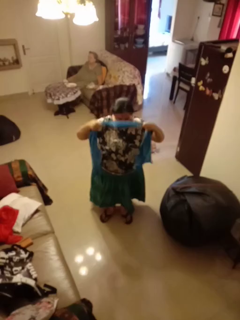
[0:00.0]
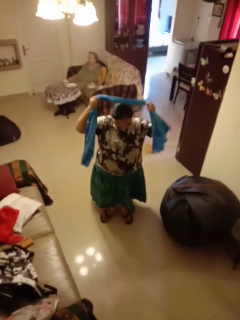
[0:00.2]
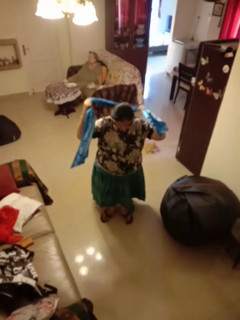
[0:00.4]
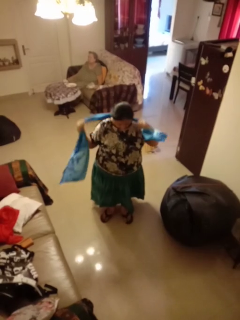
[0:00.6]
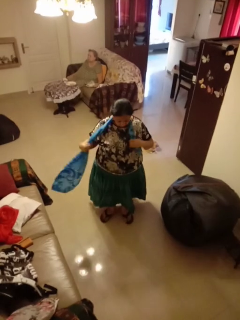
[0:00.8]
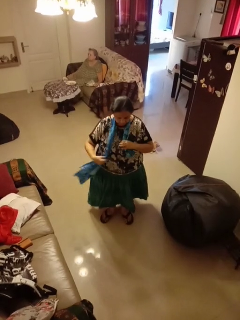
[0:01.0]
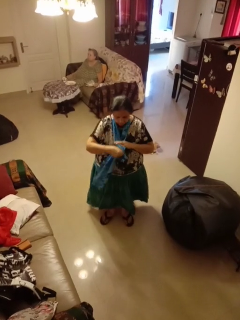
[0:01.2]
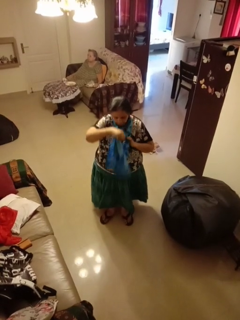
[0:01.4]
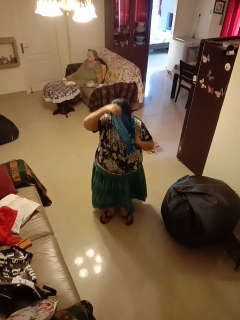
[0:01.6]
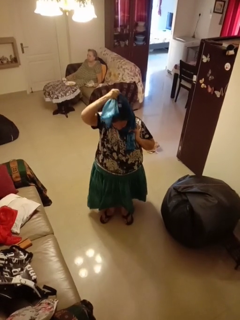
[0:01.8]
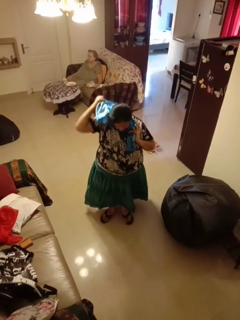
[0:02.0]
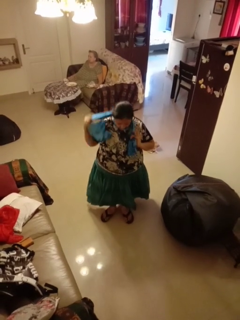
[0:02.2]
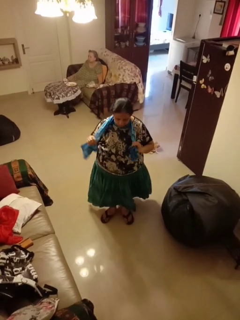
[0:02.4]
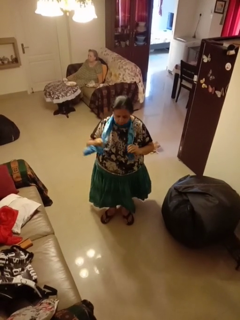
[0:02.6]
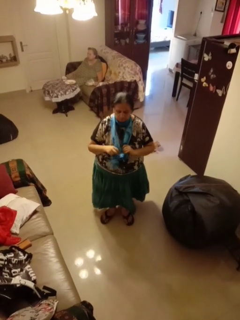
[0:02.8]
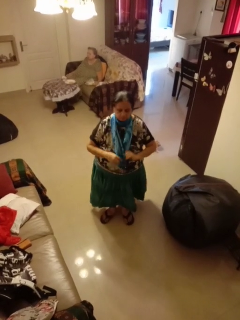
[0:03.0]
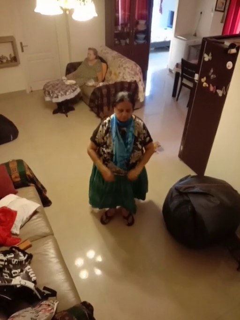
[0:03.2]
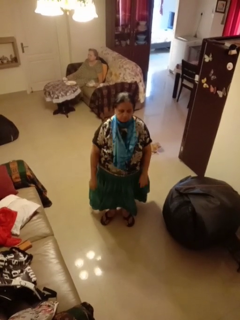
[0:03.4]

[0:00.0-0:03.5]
person puts on scarf

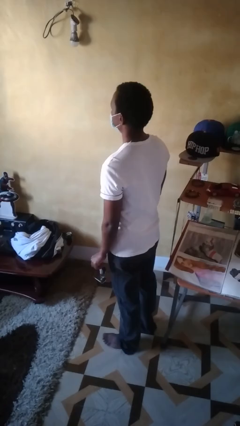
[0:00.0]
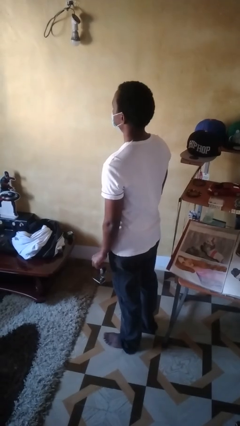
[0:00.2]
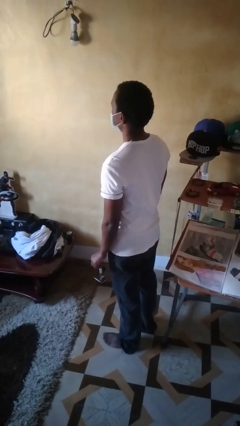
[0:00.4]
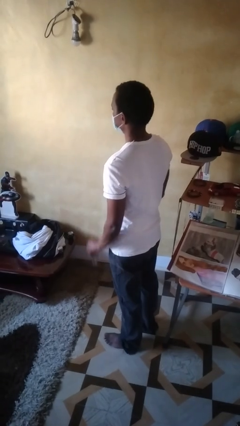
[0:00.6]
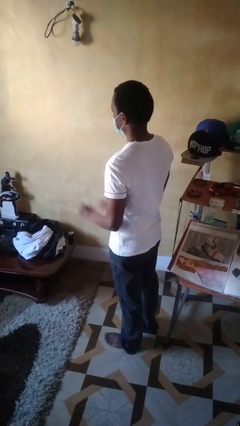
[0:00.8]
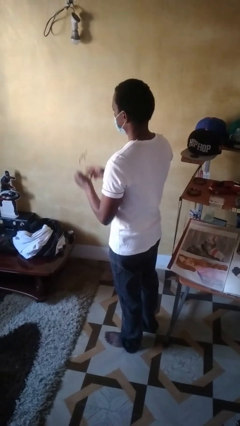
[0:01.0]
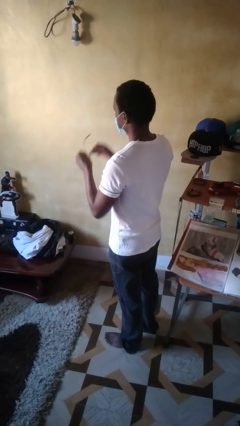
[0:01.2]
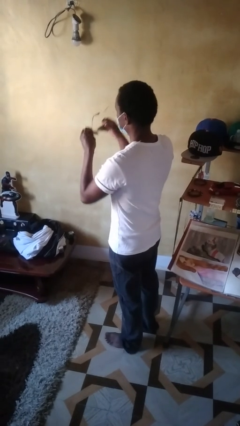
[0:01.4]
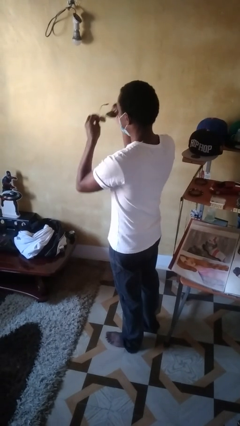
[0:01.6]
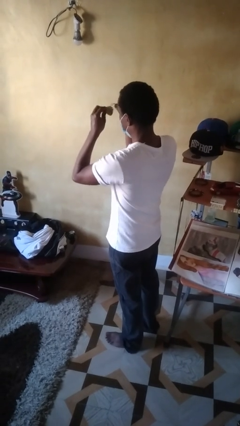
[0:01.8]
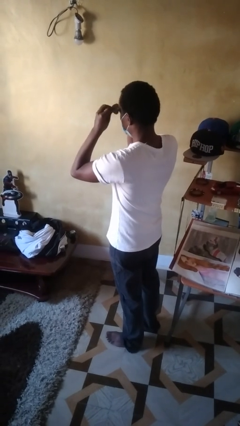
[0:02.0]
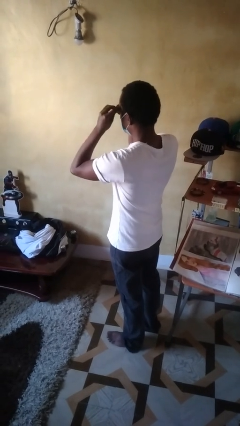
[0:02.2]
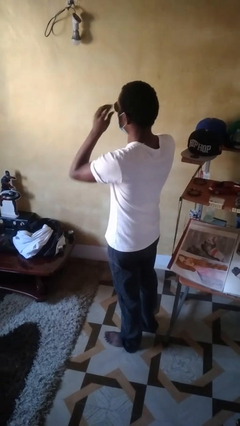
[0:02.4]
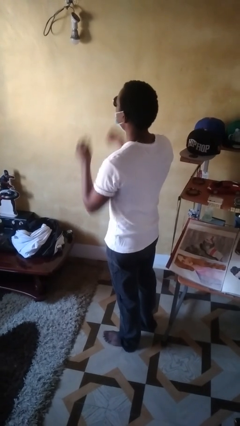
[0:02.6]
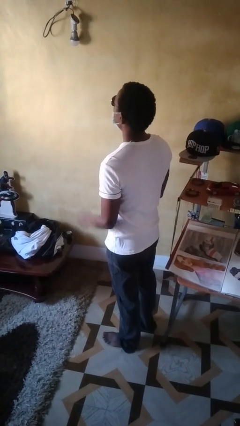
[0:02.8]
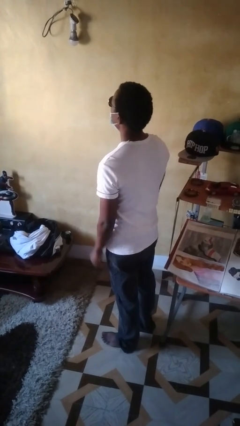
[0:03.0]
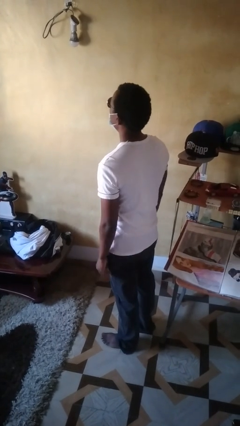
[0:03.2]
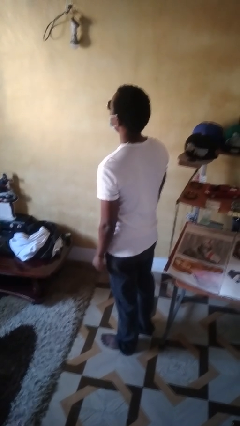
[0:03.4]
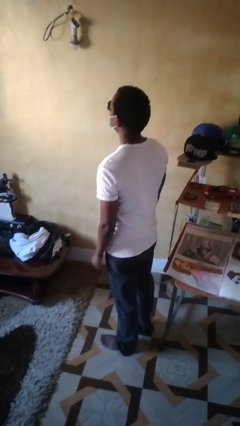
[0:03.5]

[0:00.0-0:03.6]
person puts on sunglasses

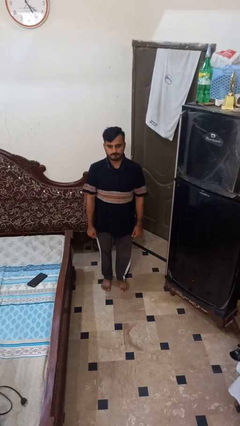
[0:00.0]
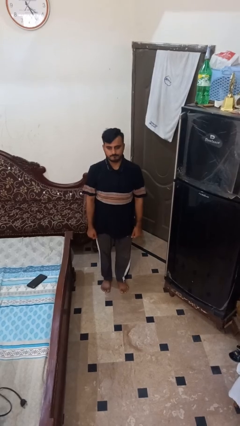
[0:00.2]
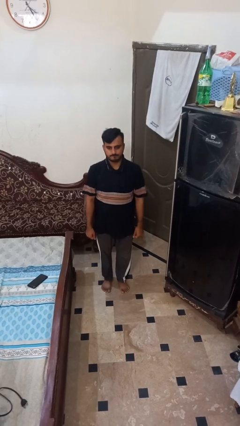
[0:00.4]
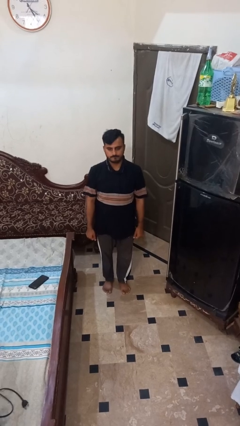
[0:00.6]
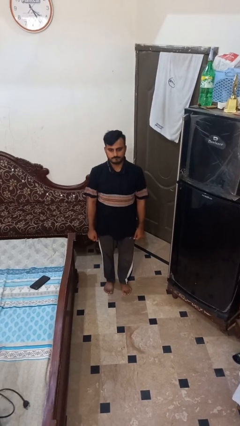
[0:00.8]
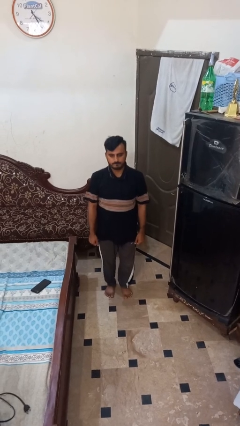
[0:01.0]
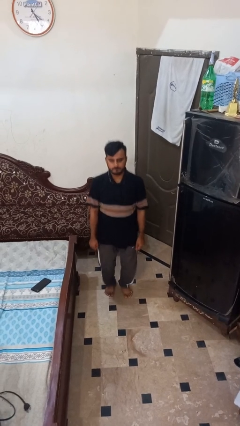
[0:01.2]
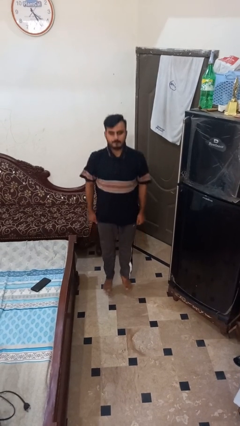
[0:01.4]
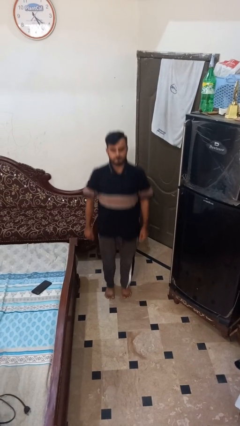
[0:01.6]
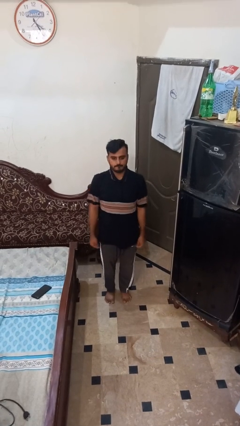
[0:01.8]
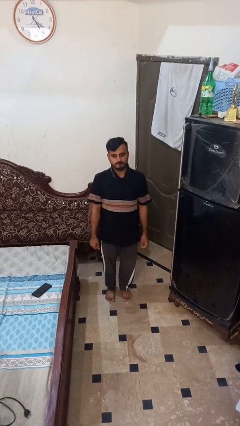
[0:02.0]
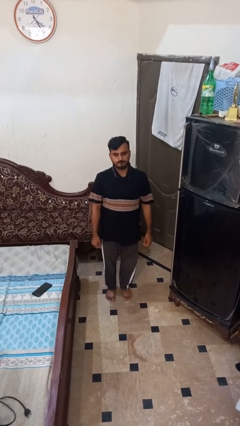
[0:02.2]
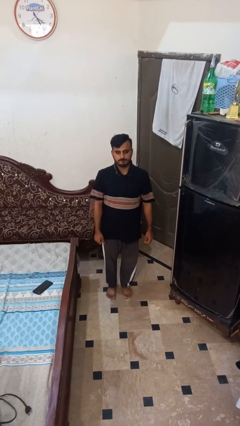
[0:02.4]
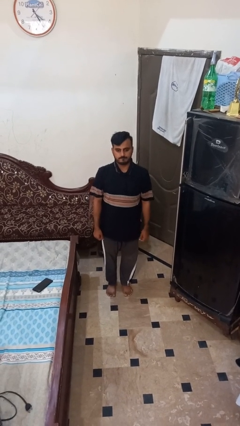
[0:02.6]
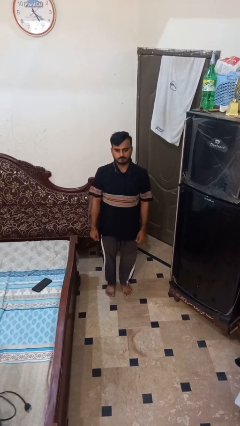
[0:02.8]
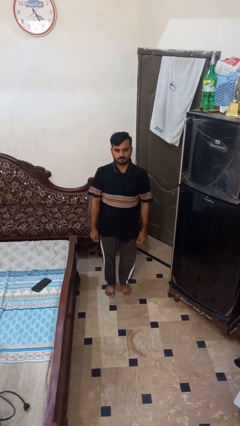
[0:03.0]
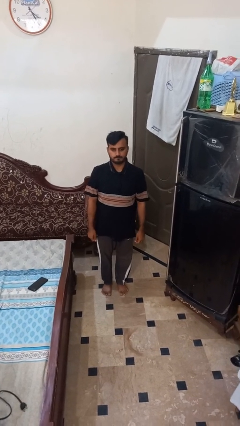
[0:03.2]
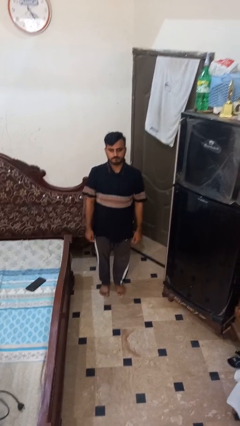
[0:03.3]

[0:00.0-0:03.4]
person jumps

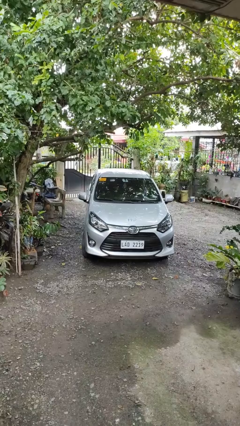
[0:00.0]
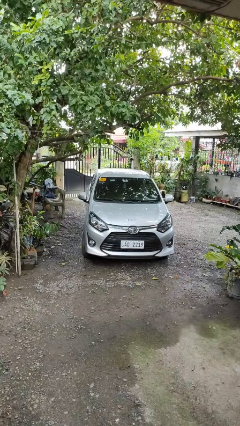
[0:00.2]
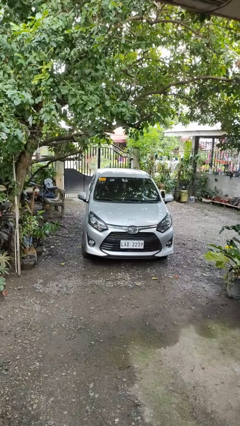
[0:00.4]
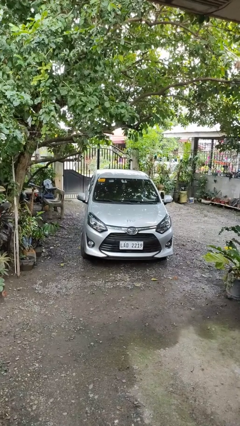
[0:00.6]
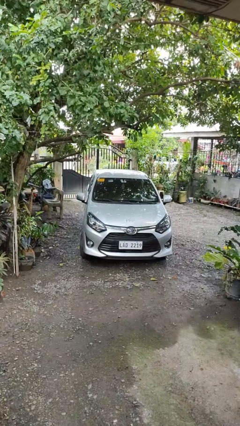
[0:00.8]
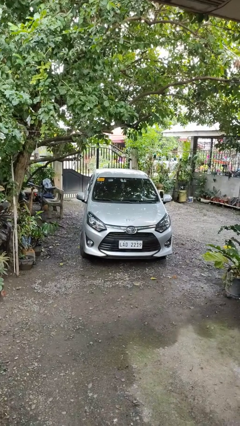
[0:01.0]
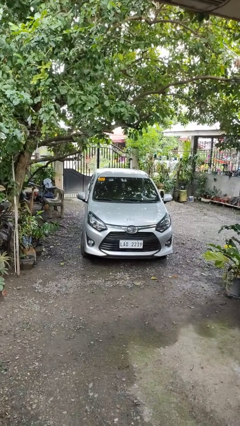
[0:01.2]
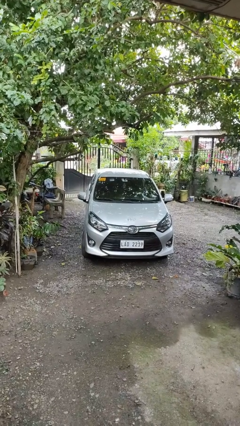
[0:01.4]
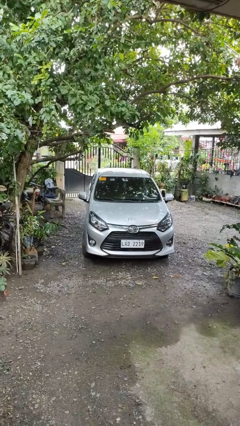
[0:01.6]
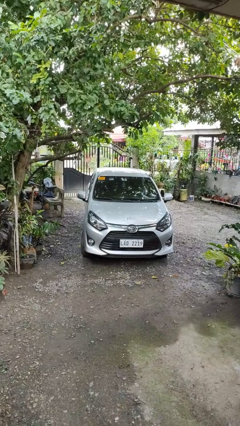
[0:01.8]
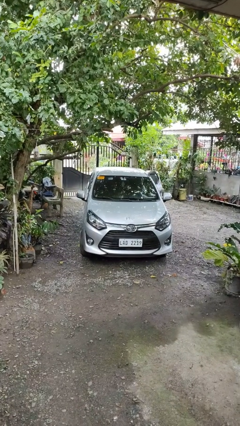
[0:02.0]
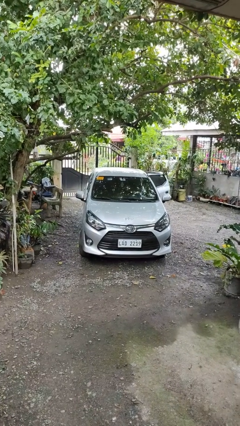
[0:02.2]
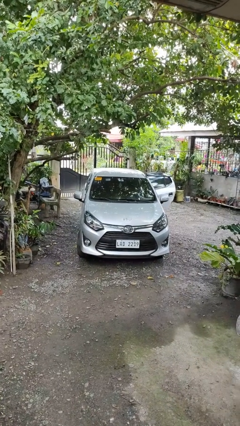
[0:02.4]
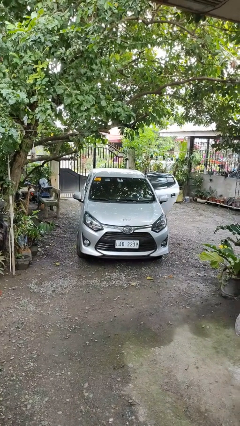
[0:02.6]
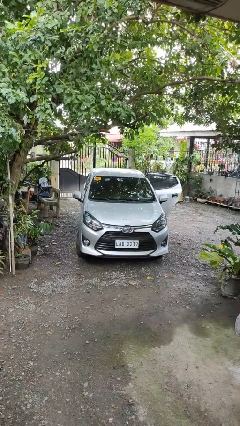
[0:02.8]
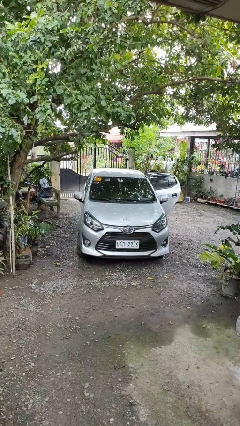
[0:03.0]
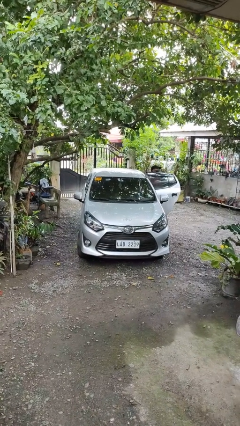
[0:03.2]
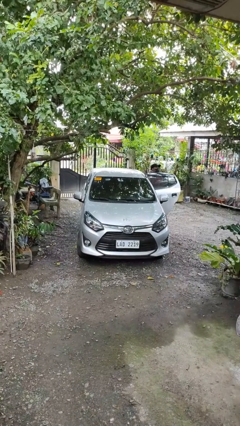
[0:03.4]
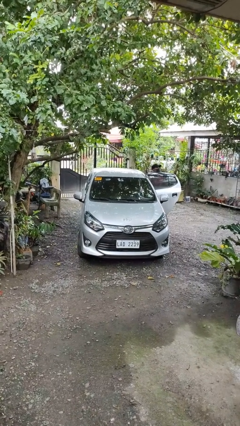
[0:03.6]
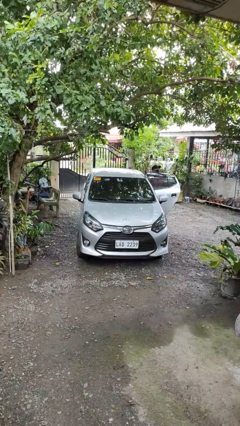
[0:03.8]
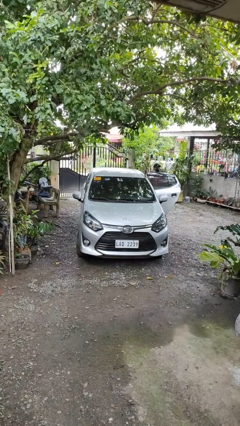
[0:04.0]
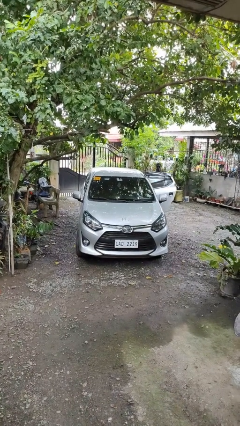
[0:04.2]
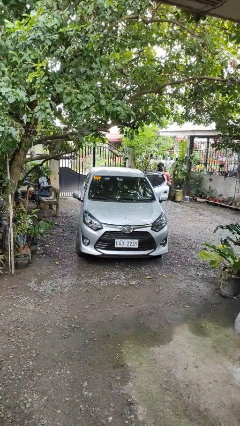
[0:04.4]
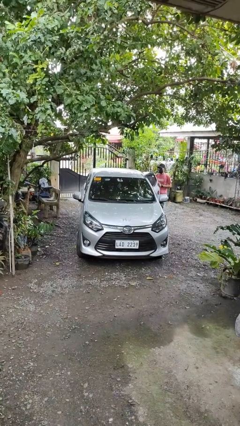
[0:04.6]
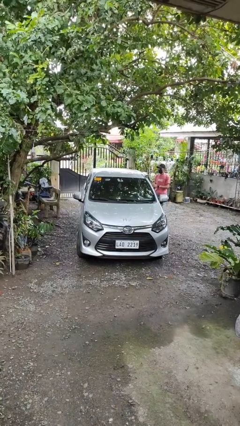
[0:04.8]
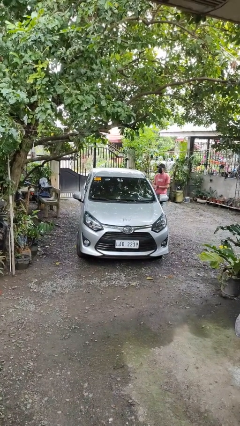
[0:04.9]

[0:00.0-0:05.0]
car drops off person

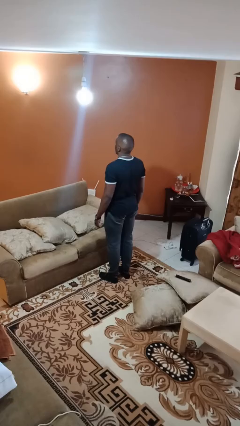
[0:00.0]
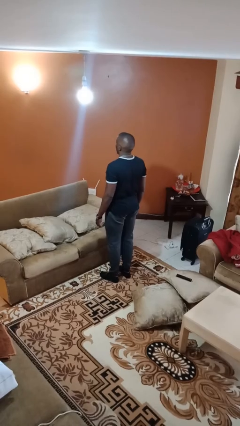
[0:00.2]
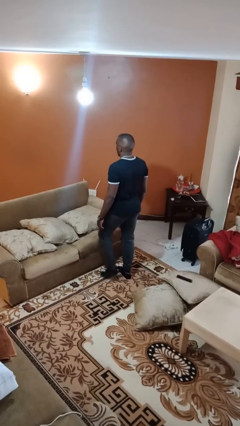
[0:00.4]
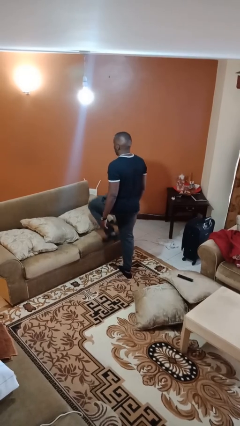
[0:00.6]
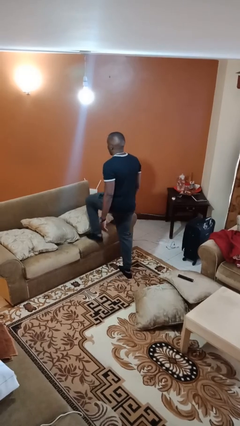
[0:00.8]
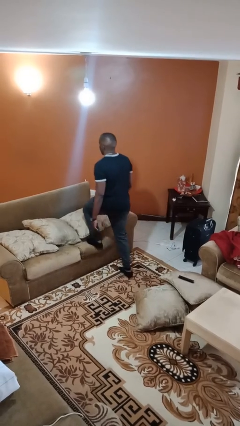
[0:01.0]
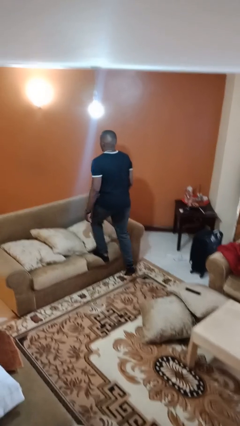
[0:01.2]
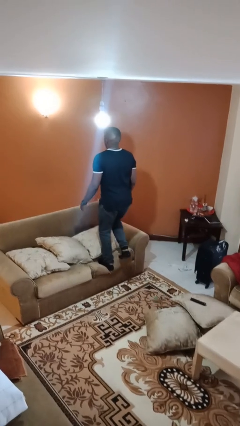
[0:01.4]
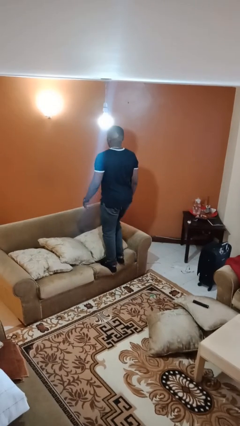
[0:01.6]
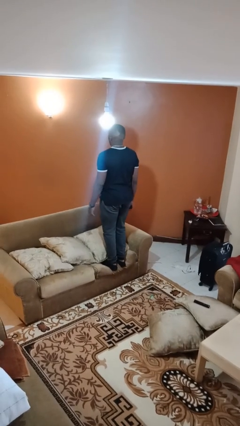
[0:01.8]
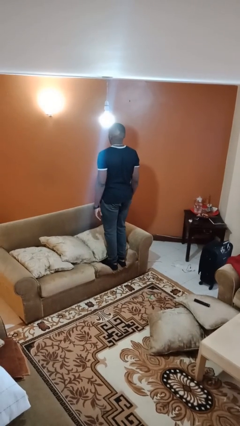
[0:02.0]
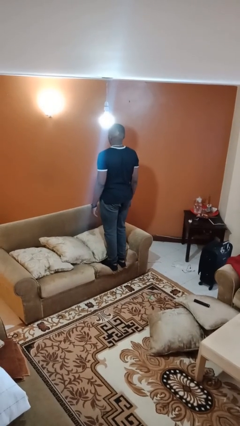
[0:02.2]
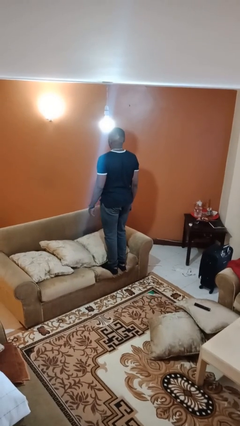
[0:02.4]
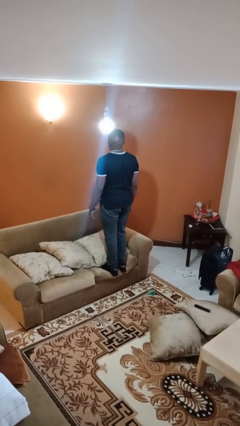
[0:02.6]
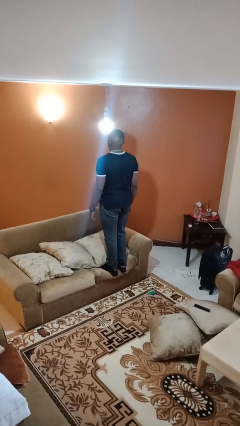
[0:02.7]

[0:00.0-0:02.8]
person climbs on couch
